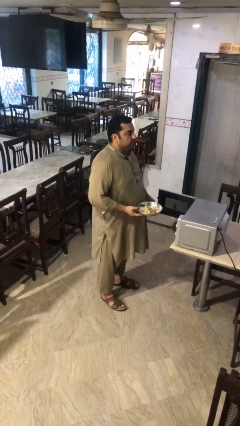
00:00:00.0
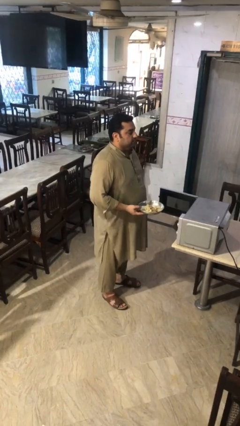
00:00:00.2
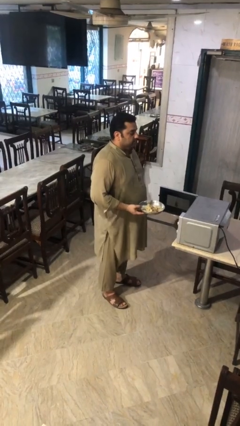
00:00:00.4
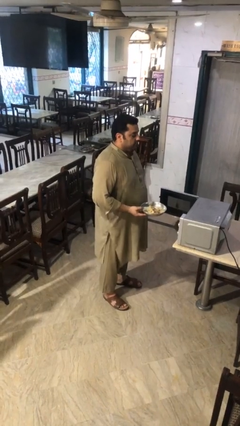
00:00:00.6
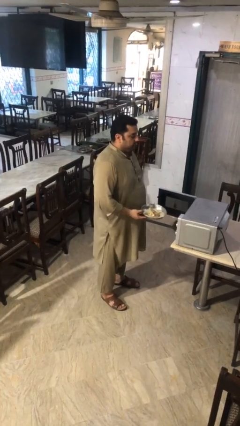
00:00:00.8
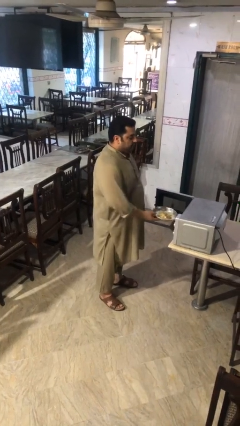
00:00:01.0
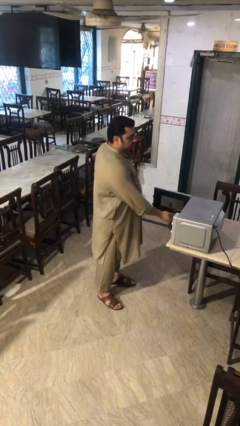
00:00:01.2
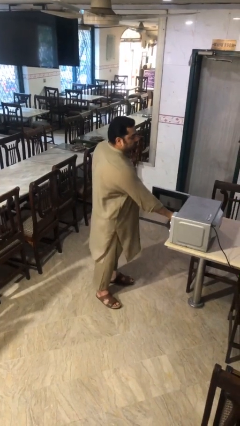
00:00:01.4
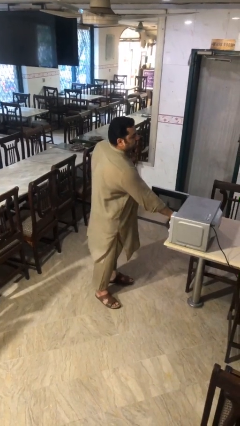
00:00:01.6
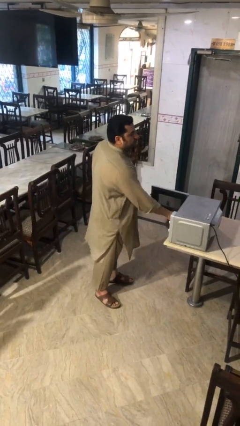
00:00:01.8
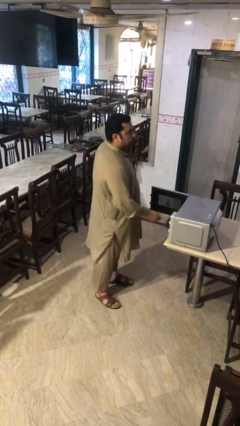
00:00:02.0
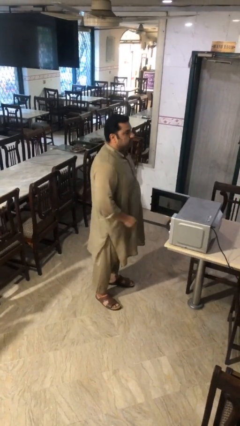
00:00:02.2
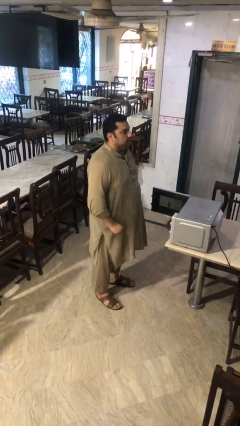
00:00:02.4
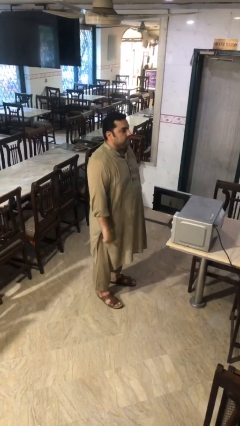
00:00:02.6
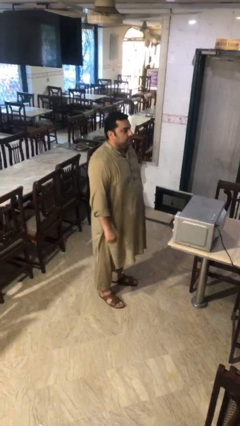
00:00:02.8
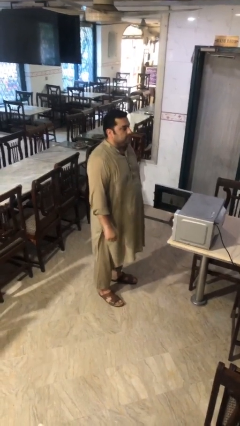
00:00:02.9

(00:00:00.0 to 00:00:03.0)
person puts object into microwave

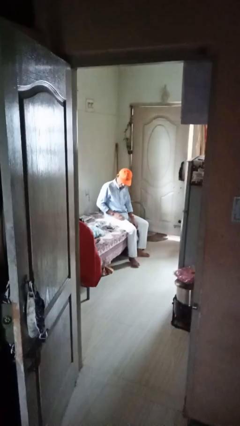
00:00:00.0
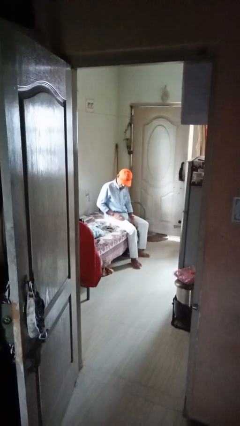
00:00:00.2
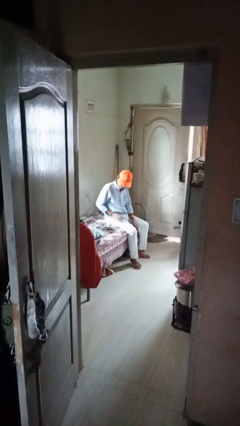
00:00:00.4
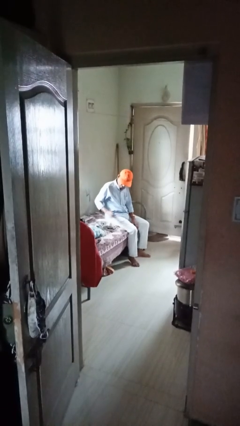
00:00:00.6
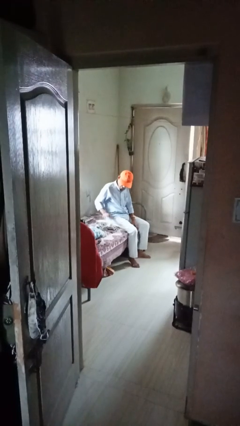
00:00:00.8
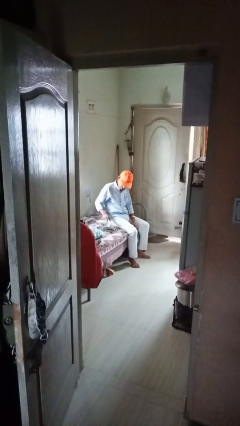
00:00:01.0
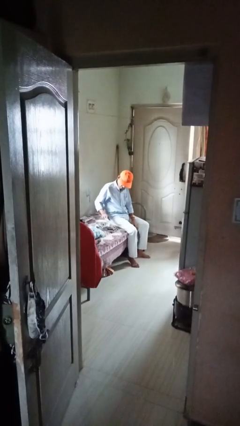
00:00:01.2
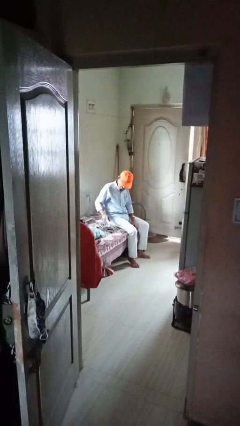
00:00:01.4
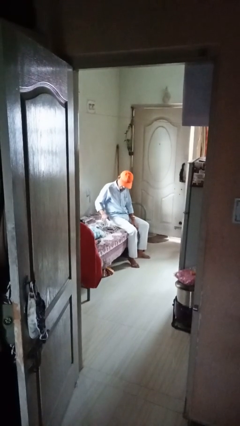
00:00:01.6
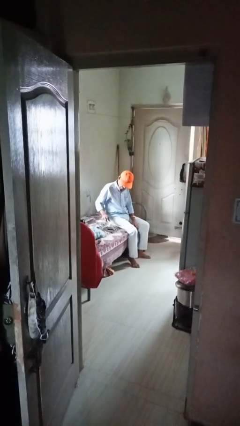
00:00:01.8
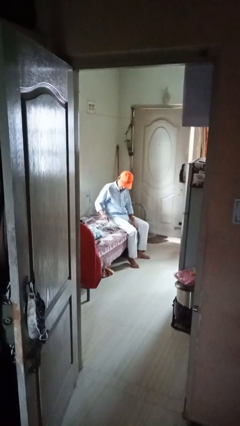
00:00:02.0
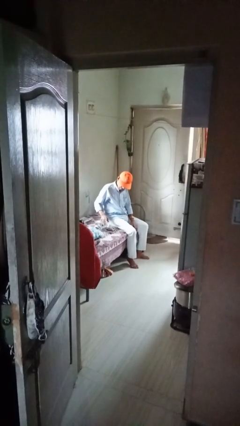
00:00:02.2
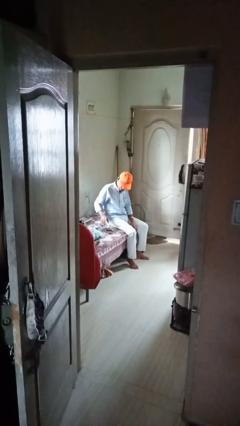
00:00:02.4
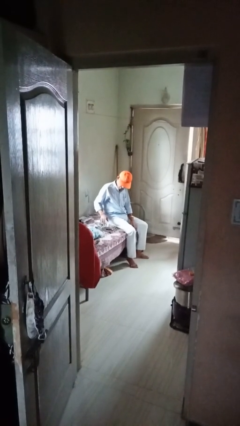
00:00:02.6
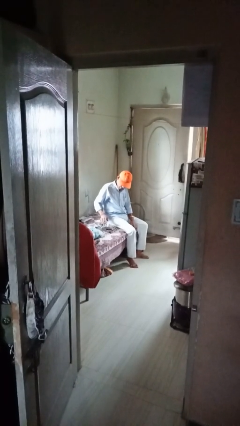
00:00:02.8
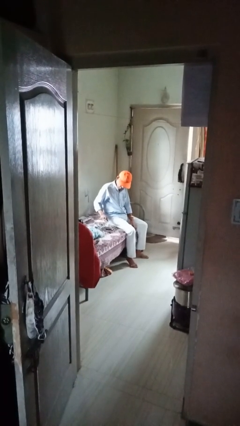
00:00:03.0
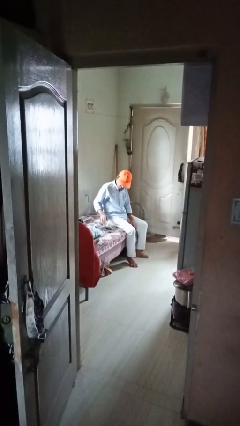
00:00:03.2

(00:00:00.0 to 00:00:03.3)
person taps object with finger

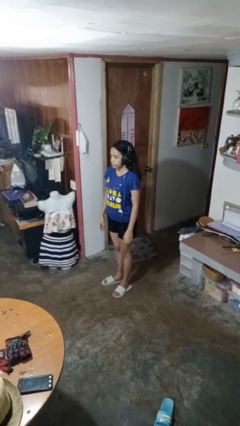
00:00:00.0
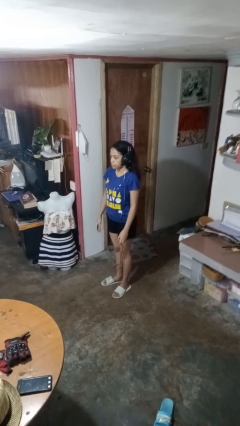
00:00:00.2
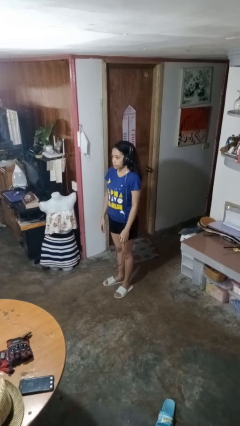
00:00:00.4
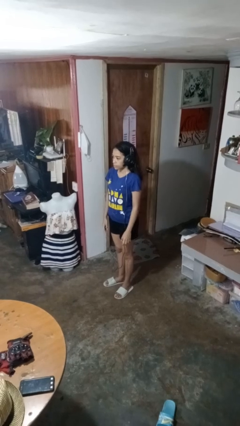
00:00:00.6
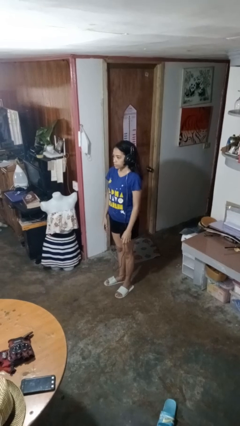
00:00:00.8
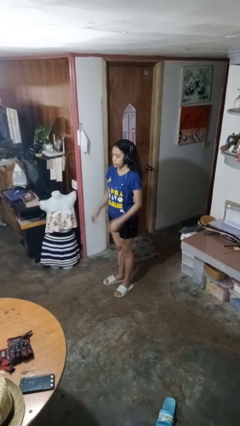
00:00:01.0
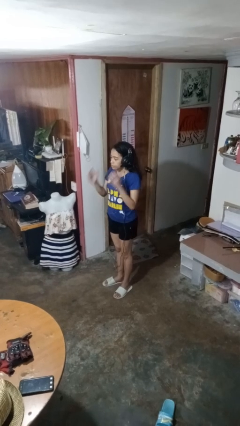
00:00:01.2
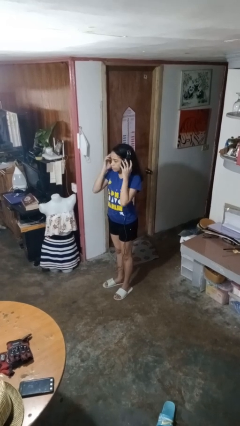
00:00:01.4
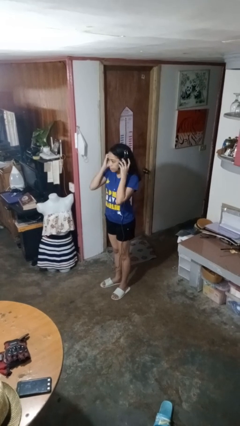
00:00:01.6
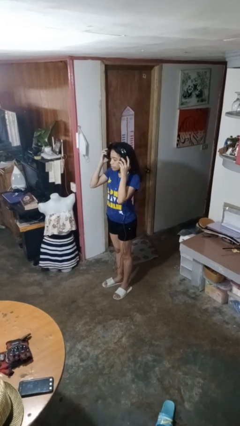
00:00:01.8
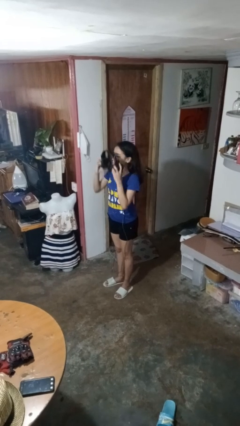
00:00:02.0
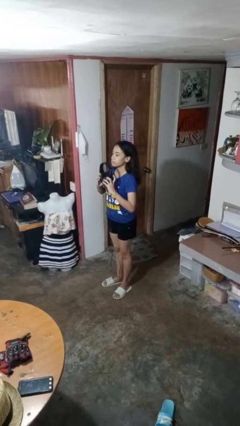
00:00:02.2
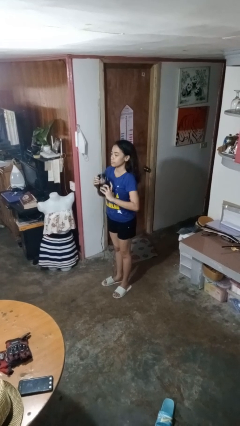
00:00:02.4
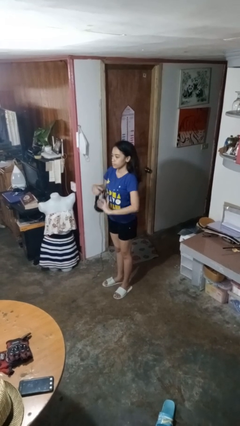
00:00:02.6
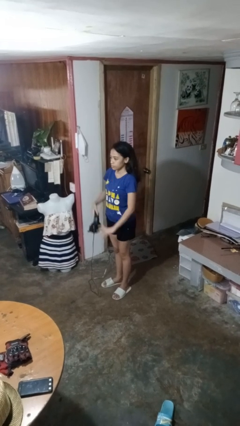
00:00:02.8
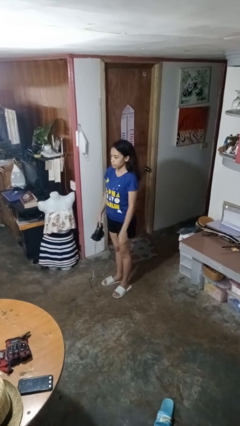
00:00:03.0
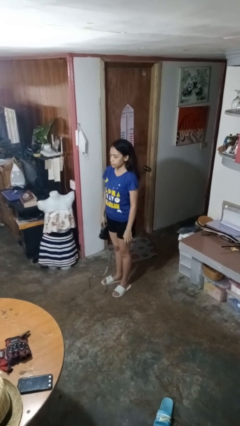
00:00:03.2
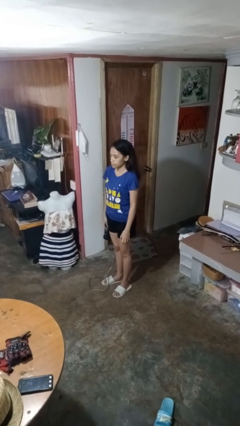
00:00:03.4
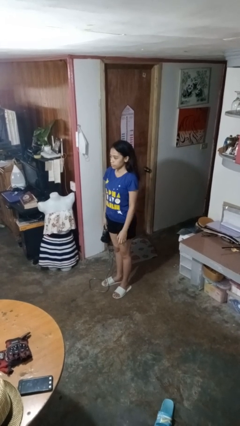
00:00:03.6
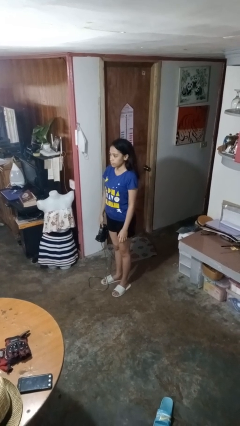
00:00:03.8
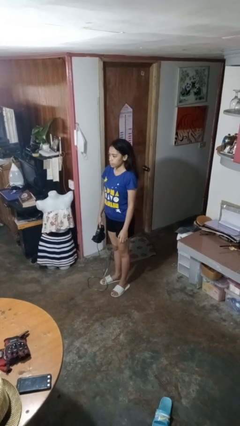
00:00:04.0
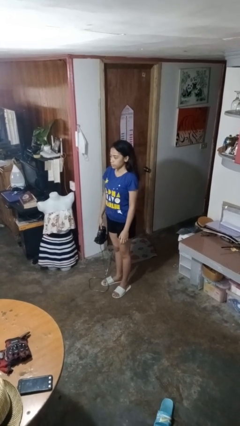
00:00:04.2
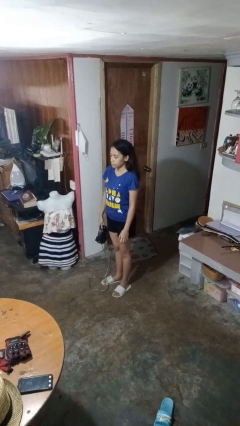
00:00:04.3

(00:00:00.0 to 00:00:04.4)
person takes off headphones

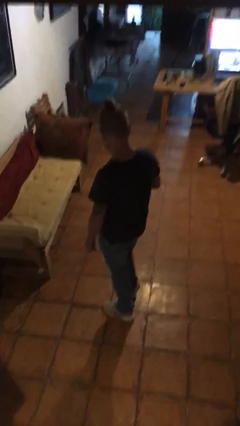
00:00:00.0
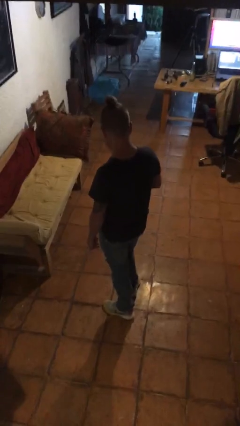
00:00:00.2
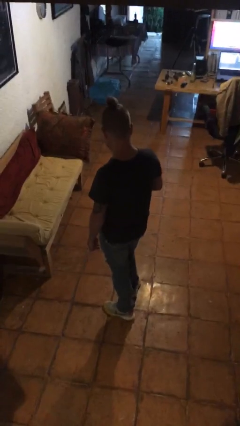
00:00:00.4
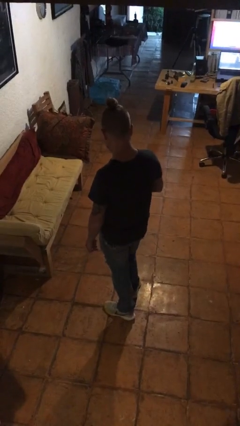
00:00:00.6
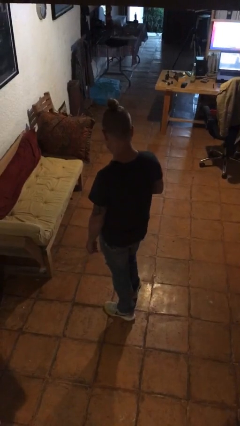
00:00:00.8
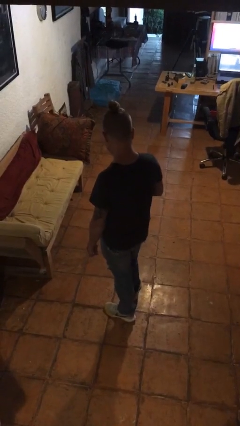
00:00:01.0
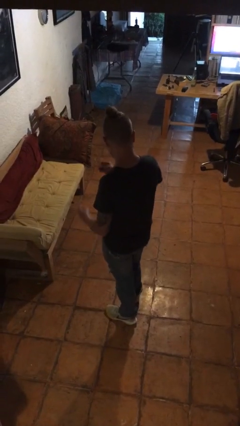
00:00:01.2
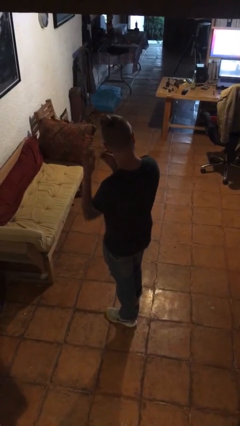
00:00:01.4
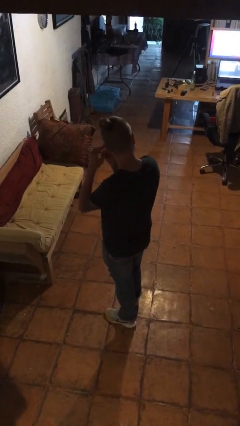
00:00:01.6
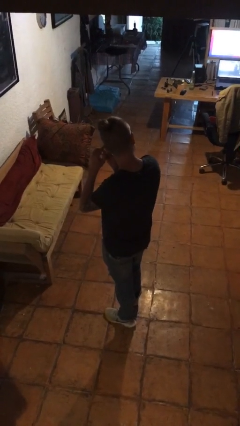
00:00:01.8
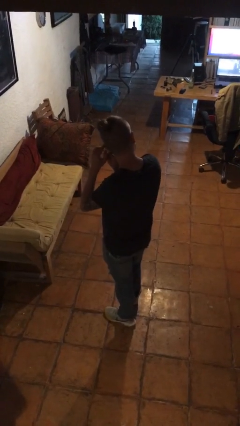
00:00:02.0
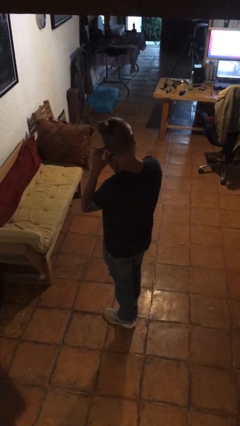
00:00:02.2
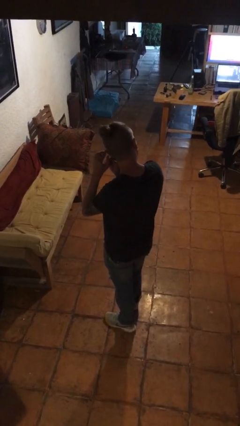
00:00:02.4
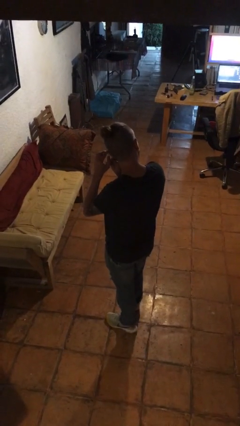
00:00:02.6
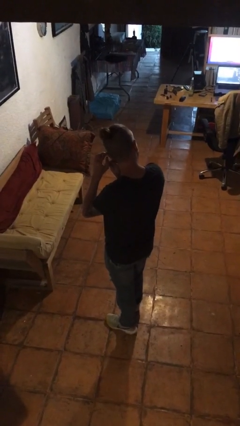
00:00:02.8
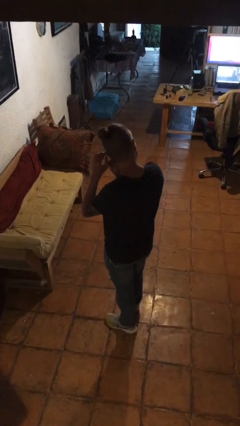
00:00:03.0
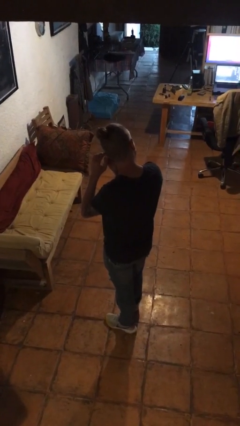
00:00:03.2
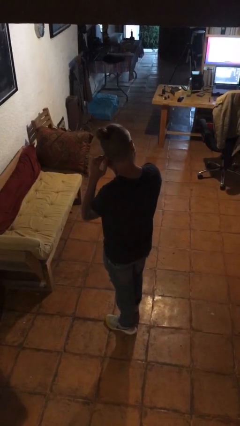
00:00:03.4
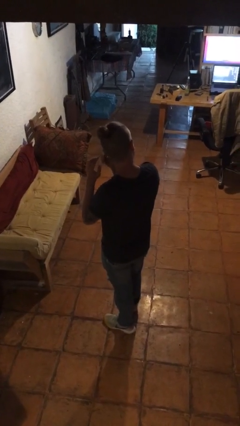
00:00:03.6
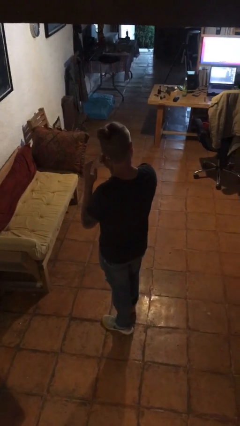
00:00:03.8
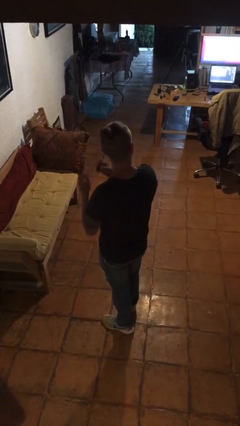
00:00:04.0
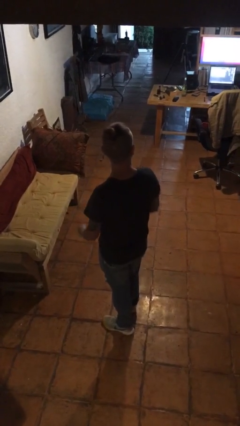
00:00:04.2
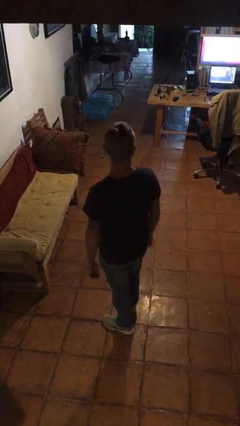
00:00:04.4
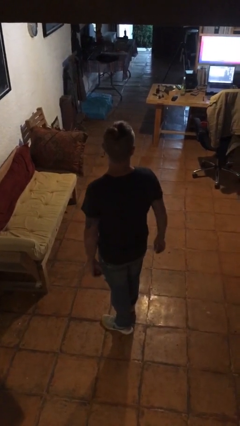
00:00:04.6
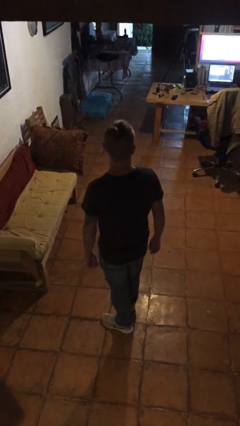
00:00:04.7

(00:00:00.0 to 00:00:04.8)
person puts on earrings

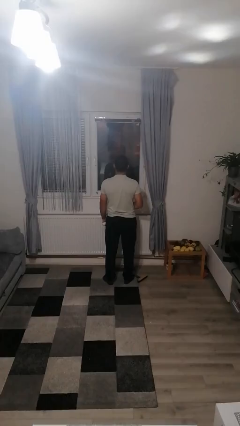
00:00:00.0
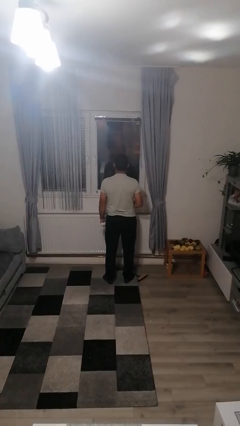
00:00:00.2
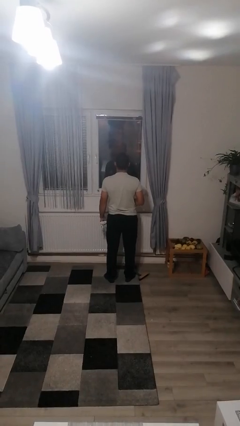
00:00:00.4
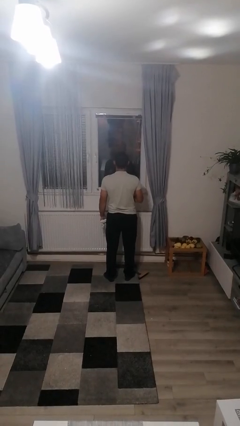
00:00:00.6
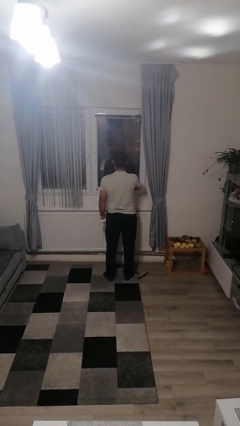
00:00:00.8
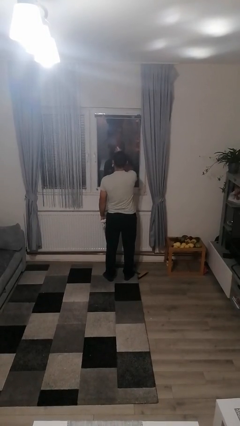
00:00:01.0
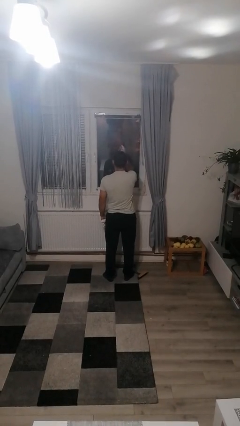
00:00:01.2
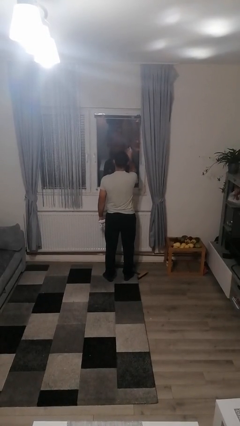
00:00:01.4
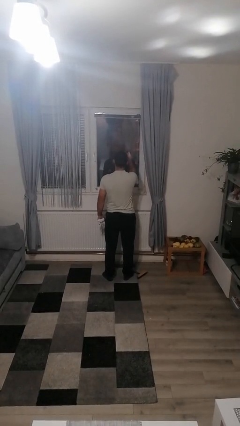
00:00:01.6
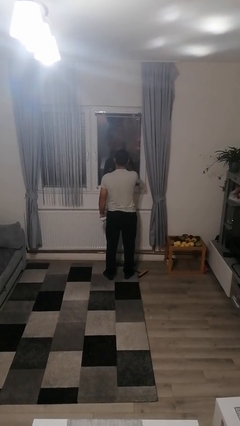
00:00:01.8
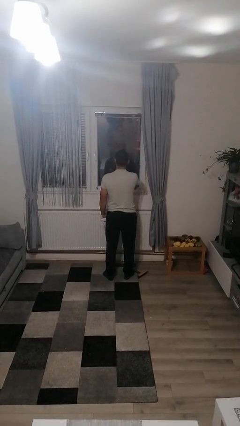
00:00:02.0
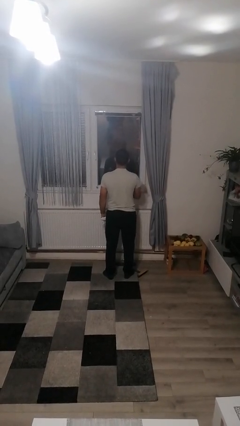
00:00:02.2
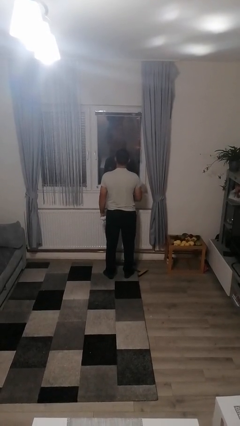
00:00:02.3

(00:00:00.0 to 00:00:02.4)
person sprays from bottle
